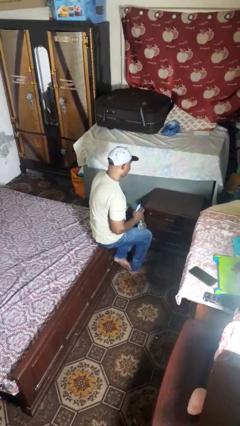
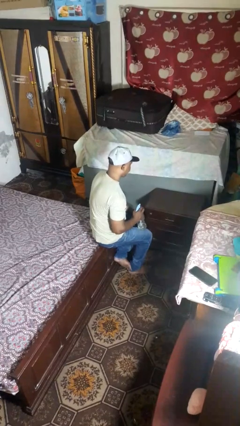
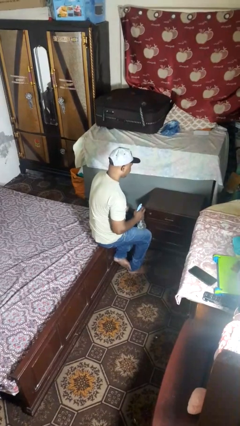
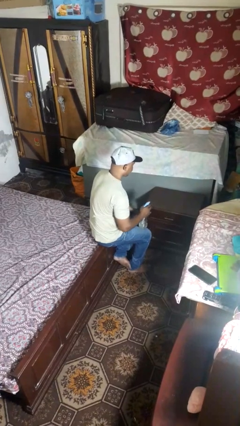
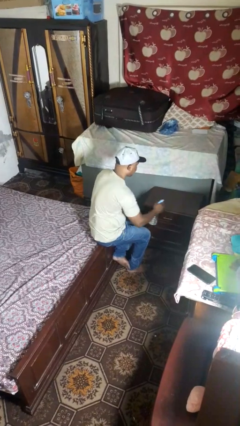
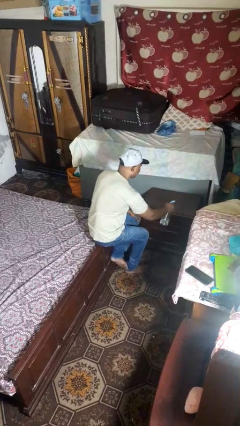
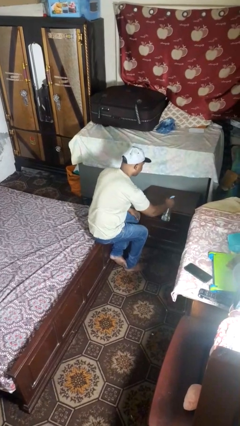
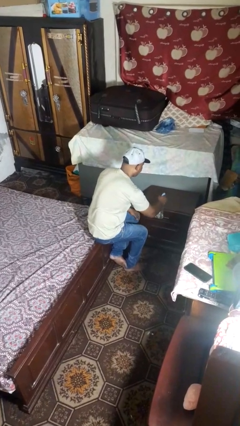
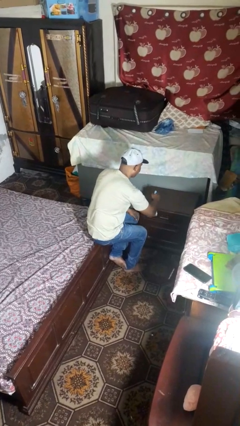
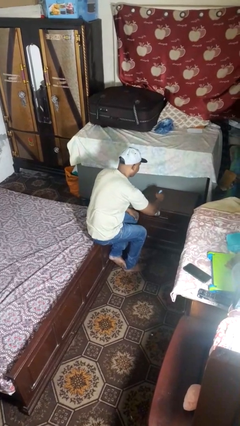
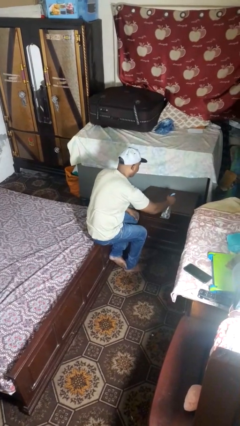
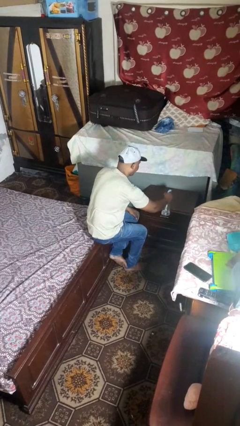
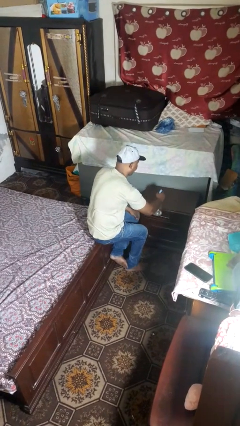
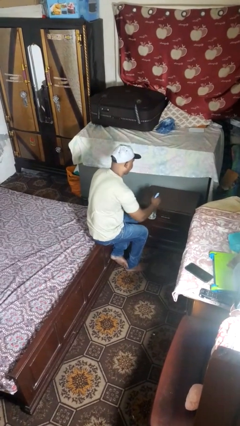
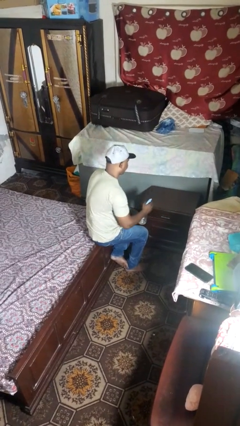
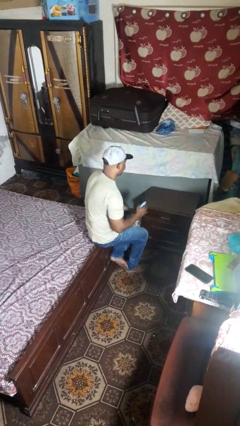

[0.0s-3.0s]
person sprays from bottle

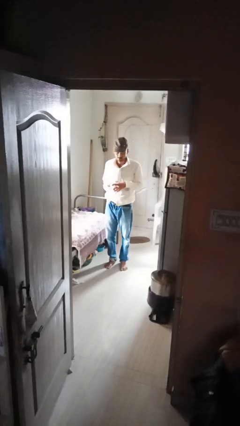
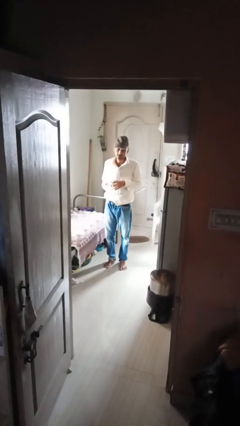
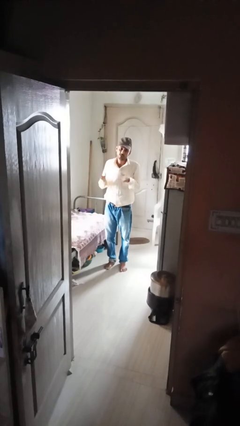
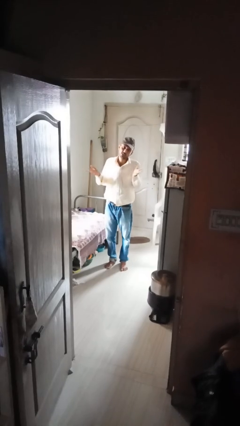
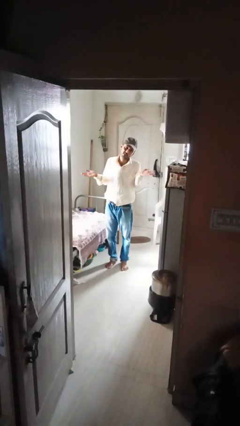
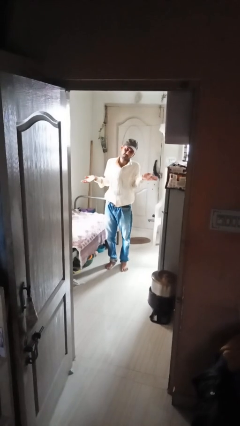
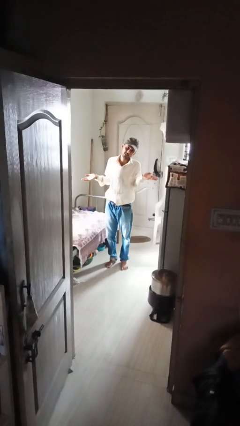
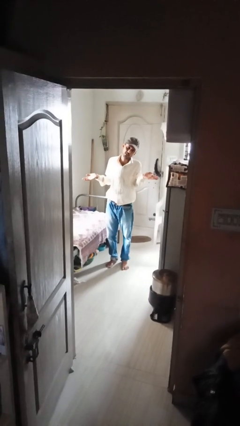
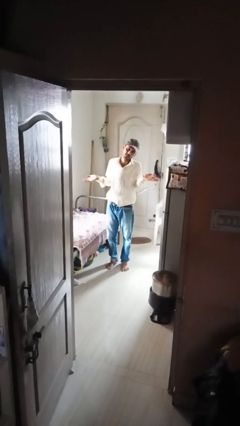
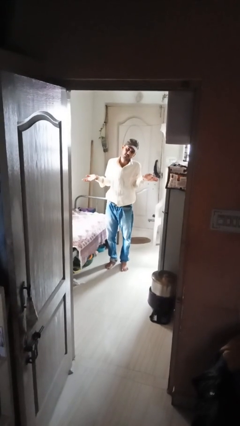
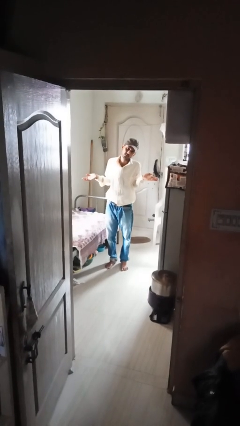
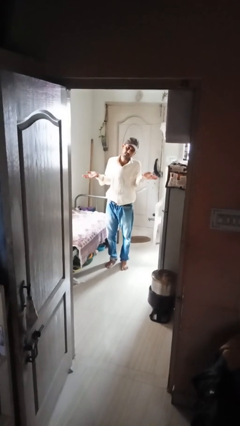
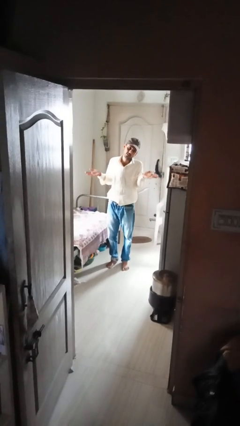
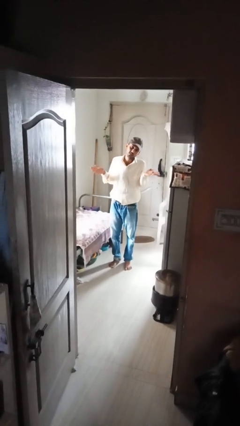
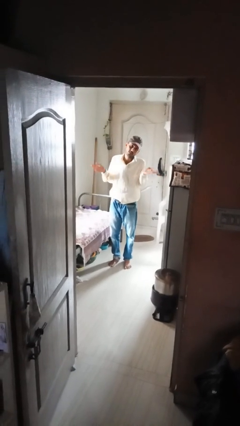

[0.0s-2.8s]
person shrugs

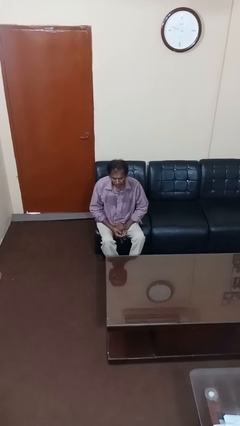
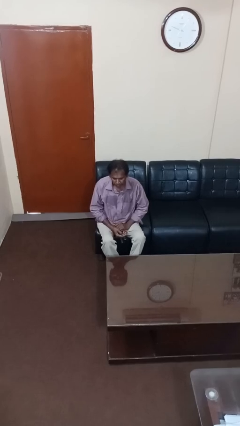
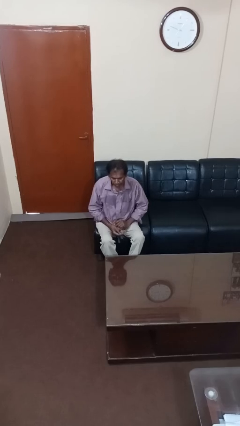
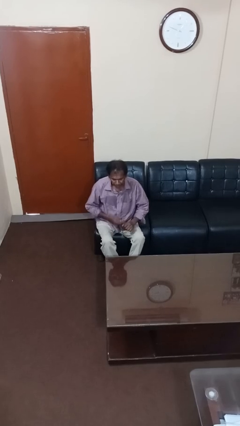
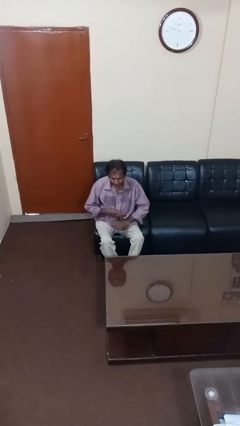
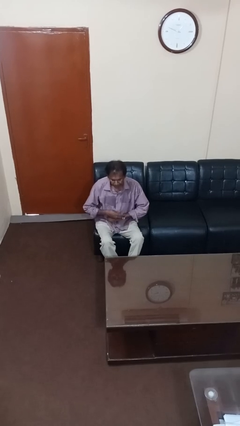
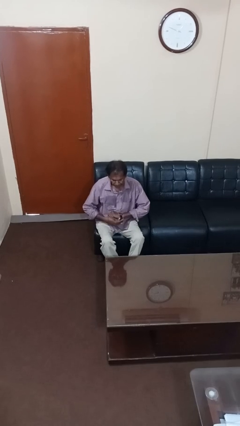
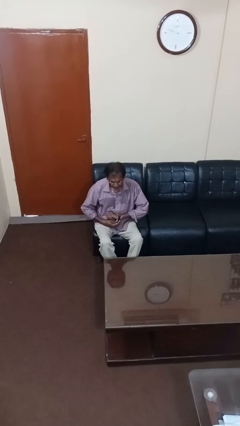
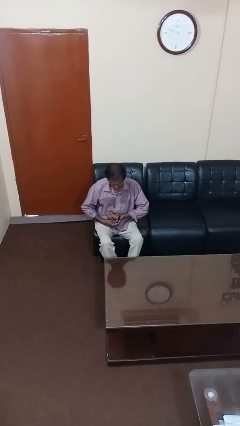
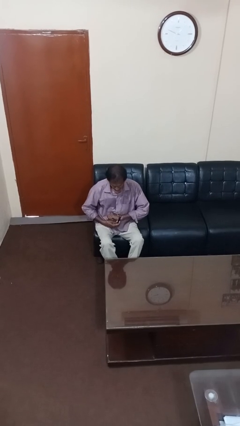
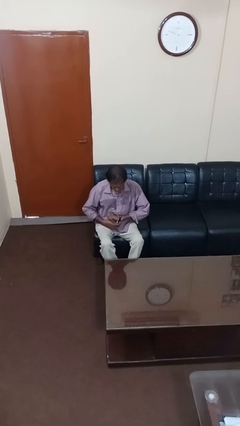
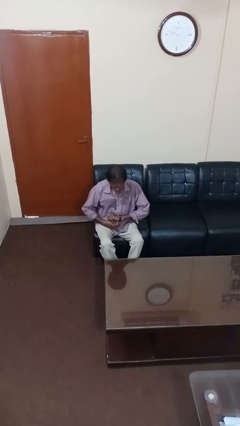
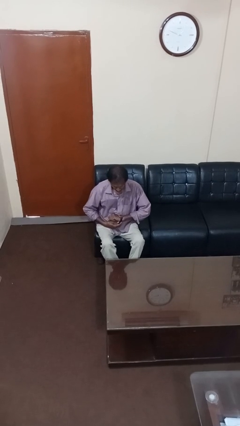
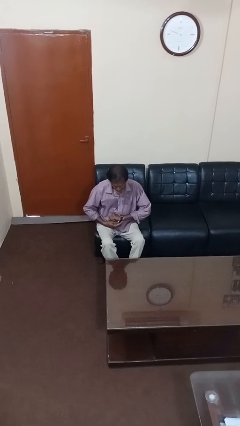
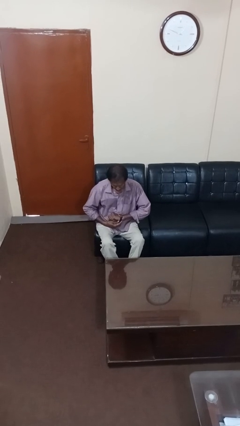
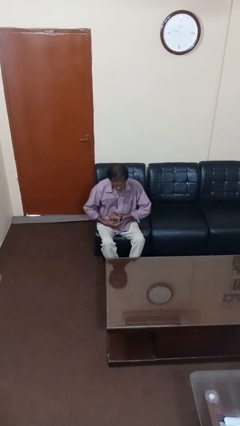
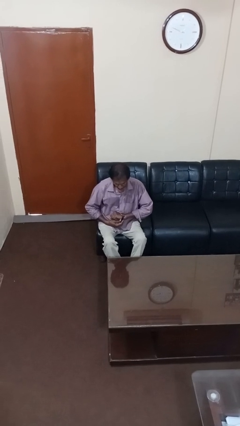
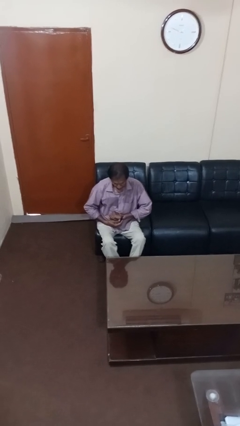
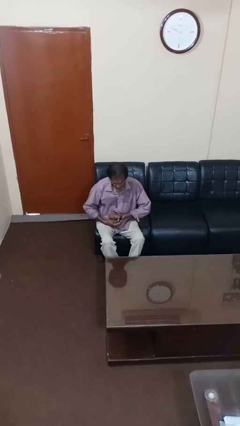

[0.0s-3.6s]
person puts on wristwatch

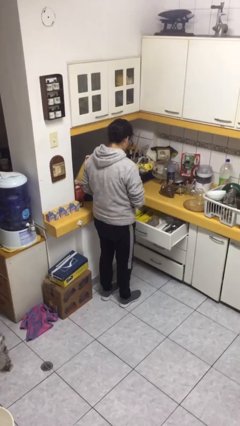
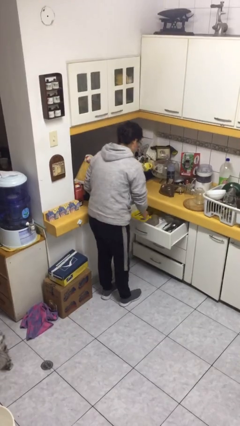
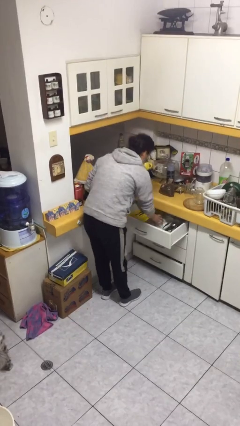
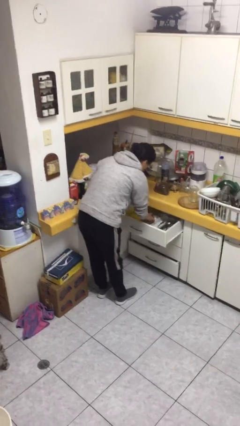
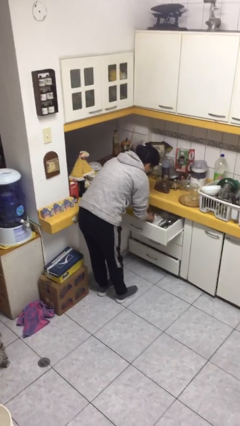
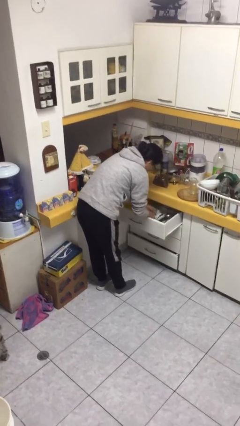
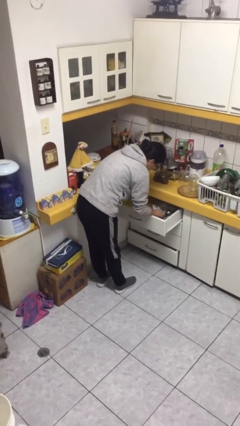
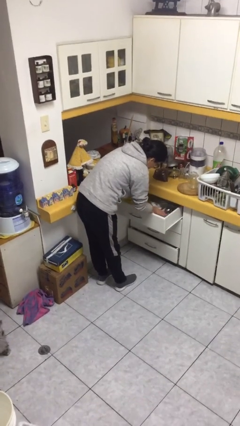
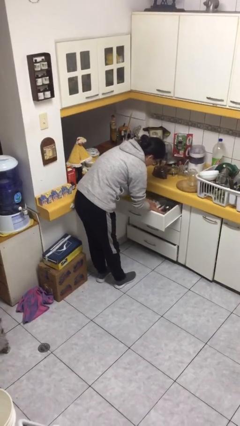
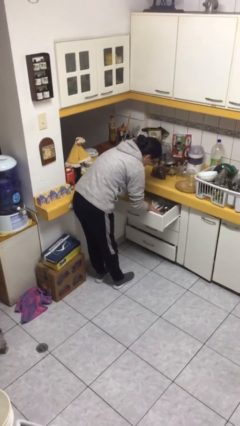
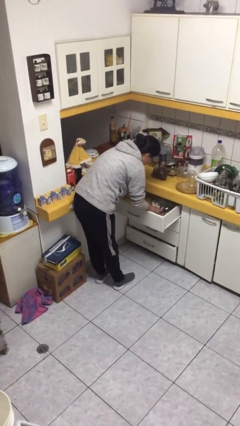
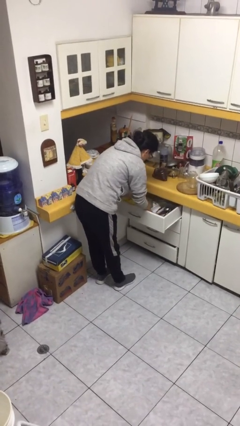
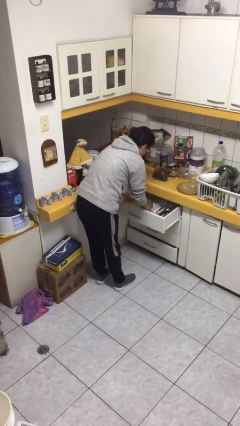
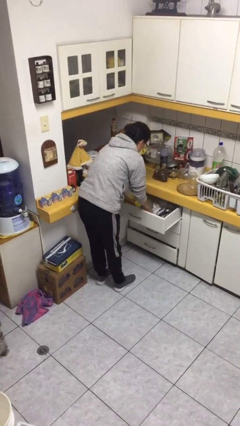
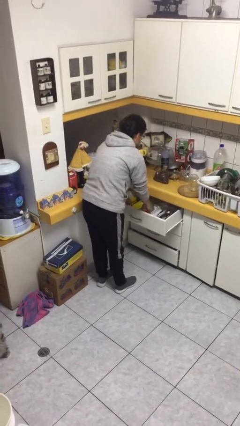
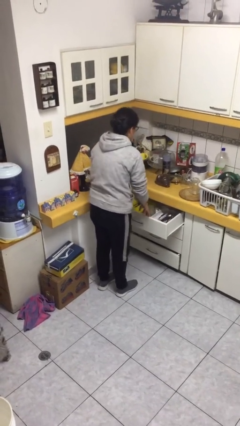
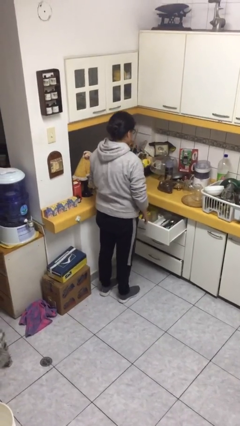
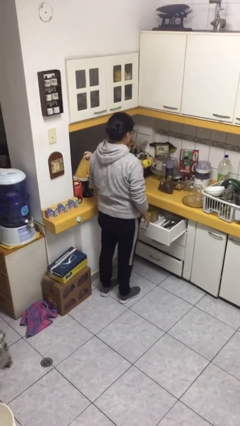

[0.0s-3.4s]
person searches in kitchen drawer

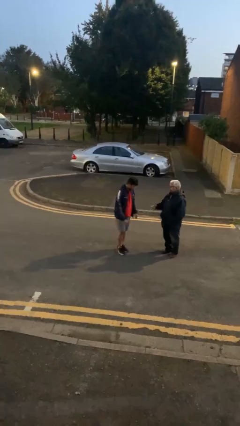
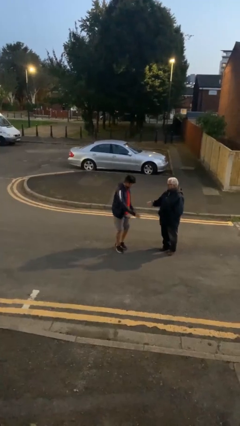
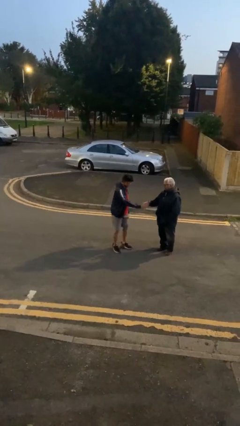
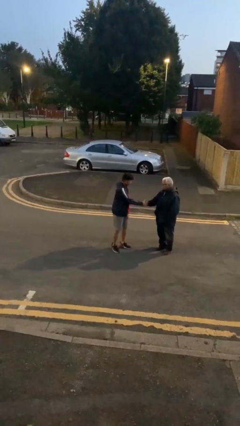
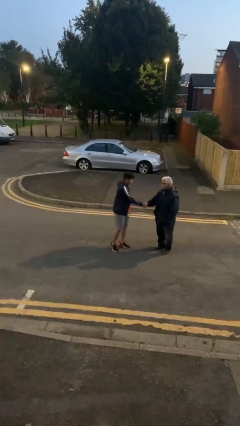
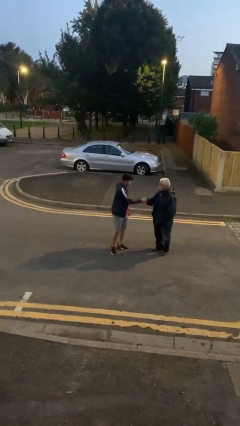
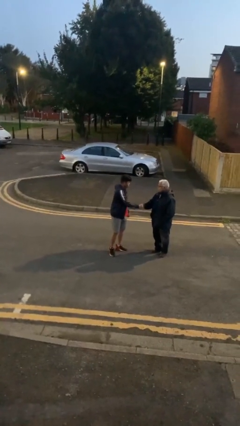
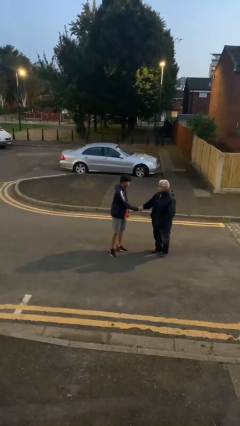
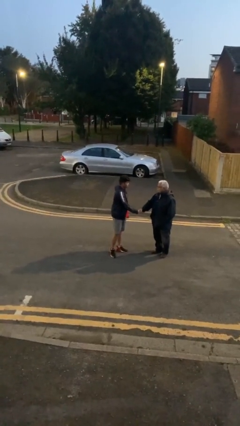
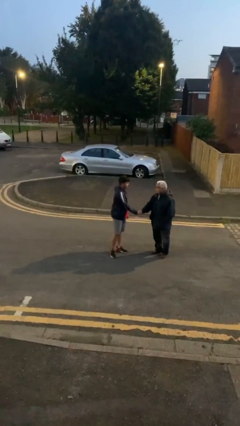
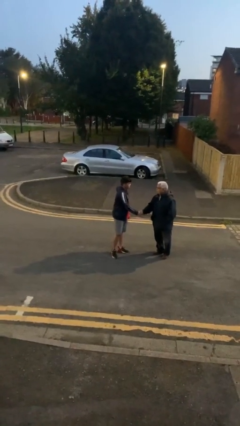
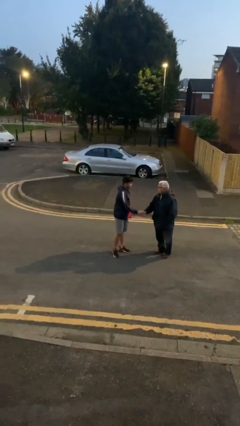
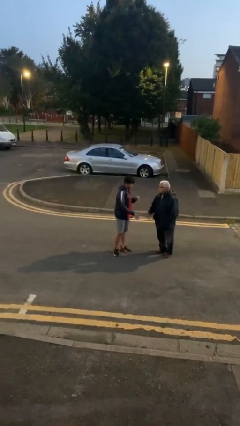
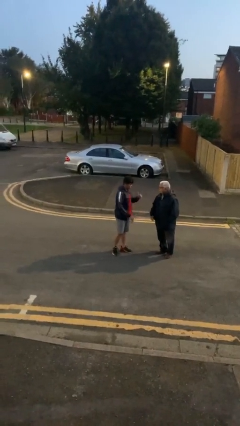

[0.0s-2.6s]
person shakes hand

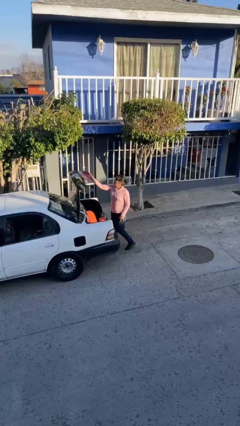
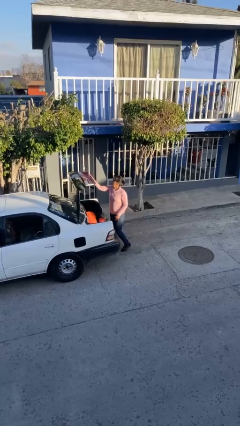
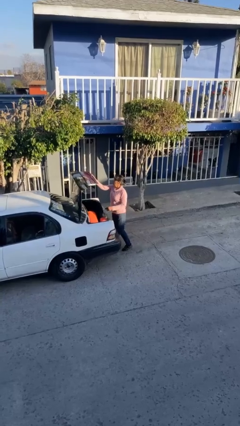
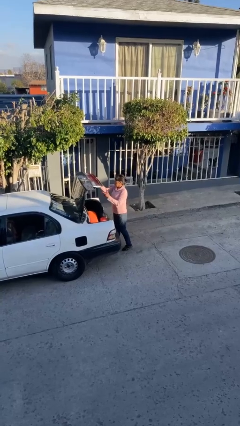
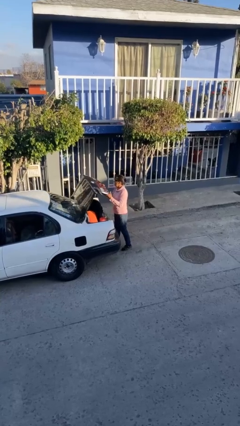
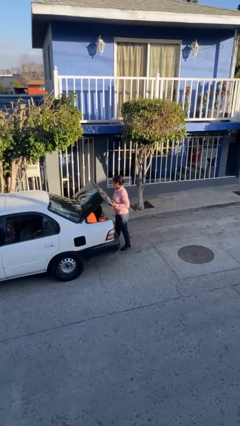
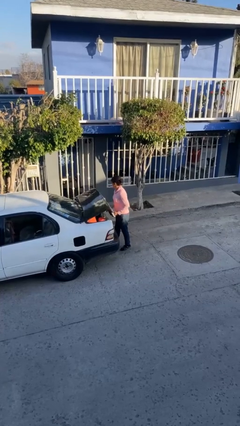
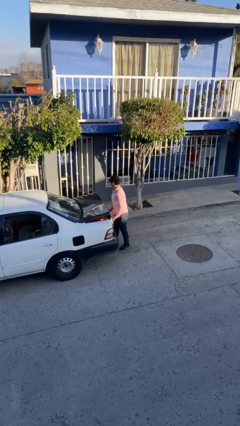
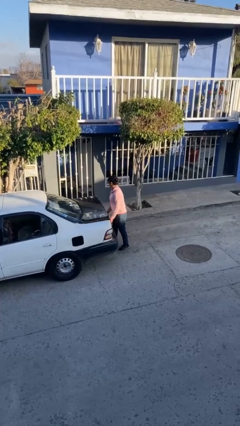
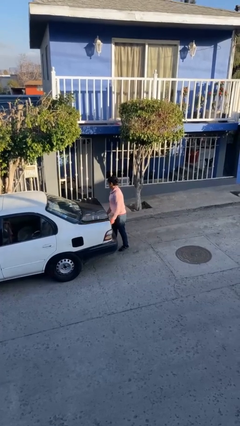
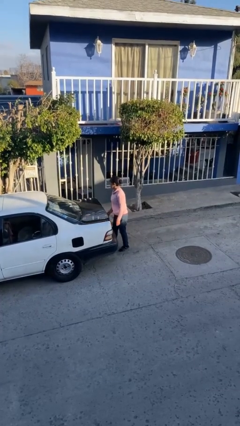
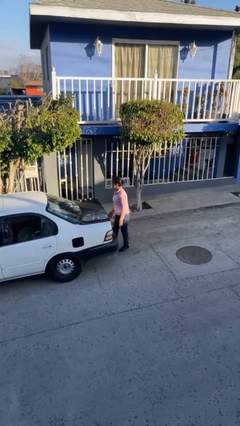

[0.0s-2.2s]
person closes car trunk
